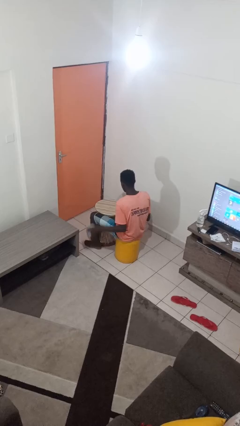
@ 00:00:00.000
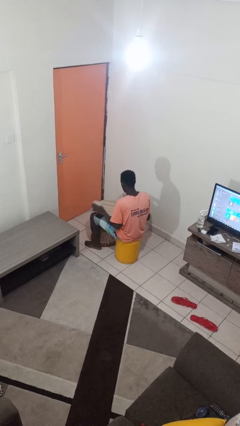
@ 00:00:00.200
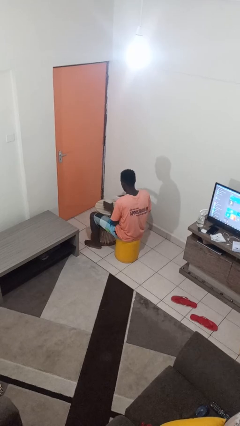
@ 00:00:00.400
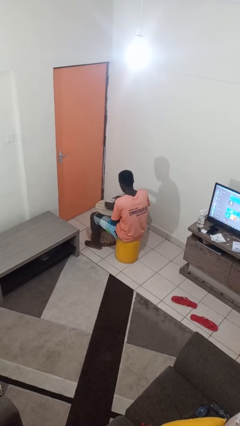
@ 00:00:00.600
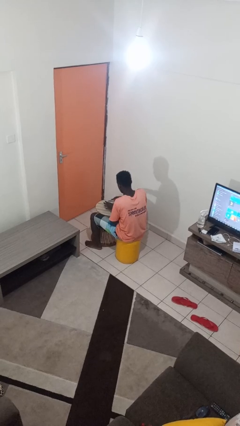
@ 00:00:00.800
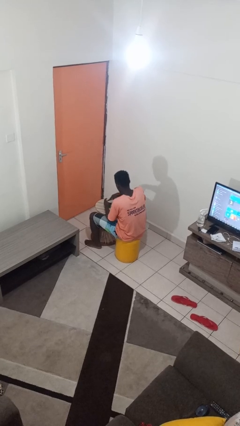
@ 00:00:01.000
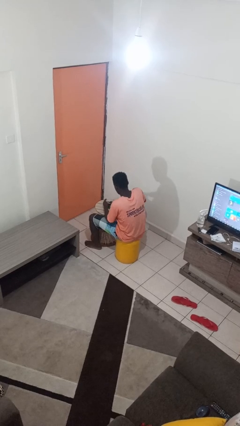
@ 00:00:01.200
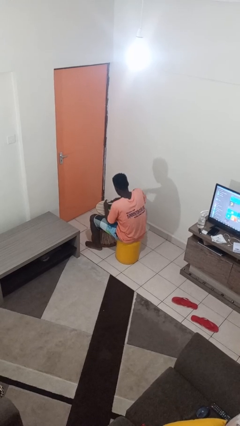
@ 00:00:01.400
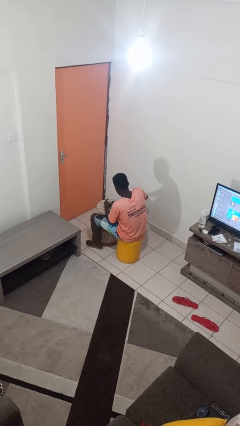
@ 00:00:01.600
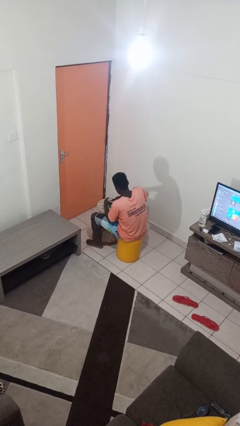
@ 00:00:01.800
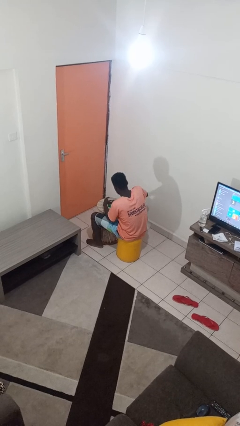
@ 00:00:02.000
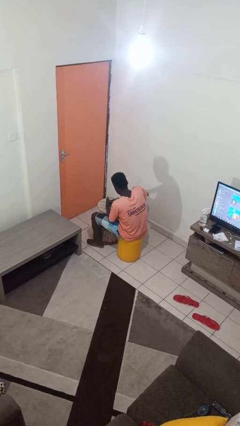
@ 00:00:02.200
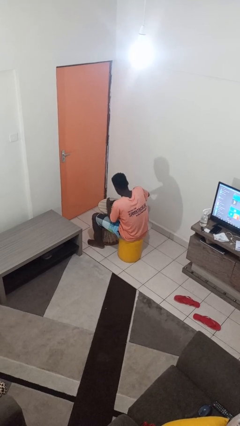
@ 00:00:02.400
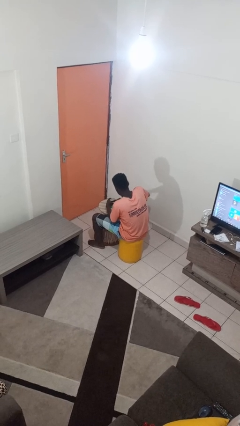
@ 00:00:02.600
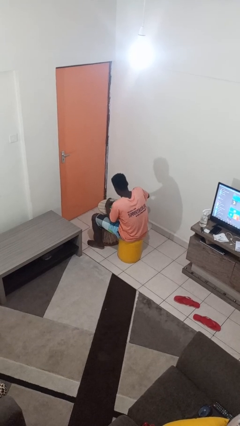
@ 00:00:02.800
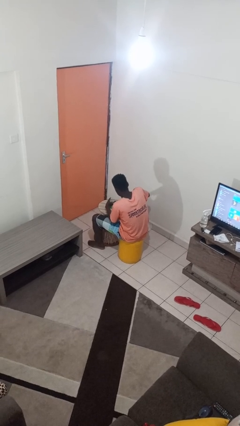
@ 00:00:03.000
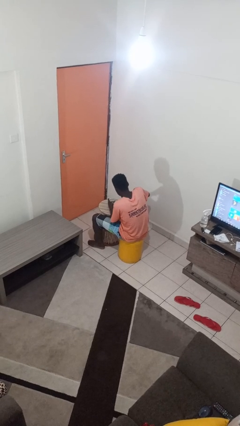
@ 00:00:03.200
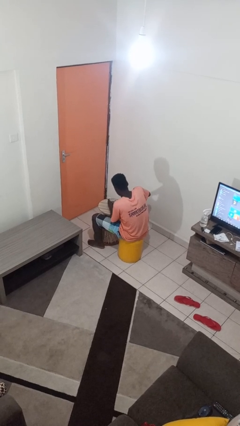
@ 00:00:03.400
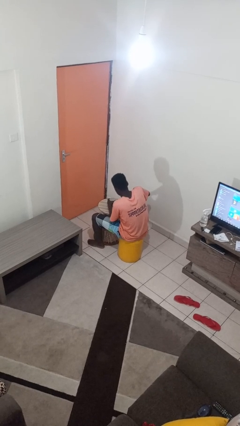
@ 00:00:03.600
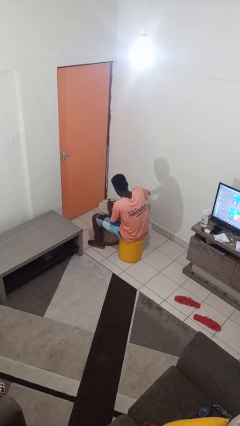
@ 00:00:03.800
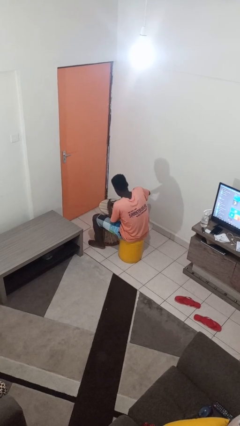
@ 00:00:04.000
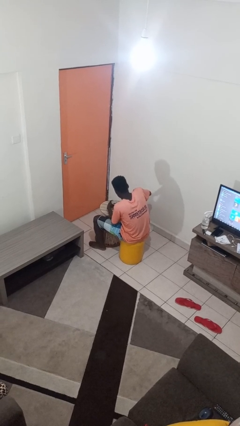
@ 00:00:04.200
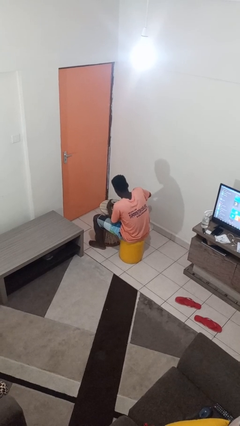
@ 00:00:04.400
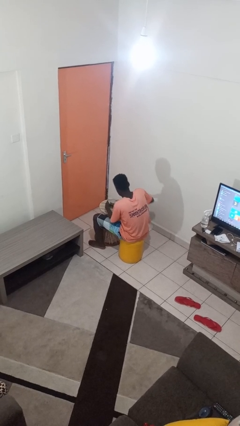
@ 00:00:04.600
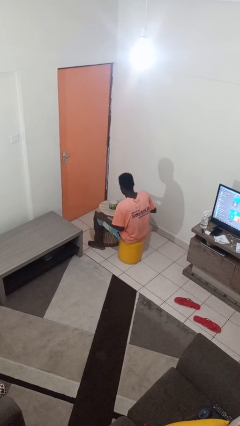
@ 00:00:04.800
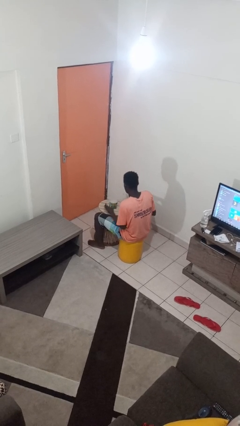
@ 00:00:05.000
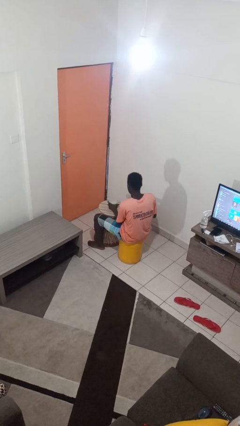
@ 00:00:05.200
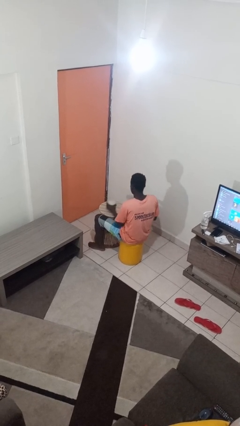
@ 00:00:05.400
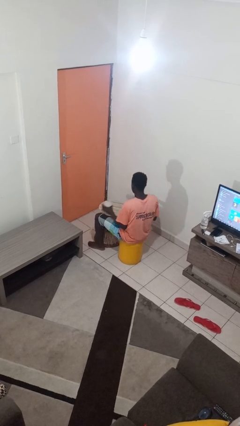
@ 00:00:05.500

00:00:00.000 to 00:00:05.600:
person opens can with can opener

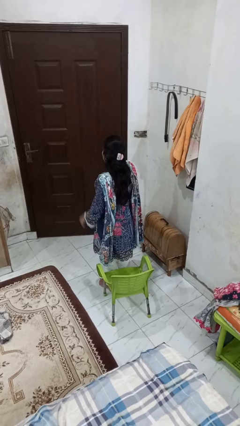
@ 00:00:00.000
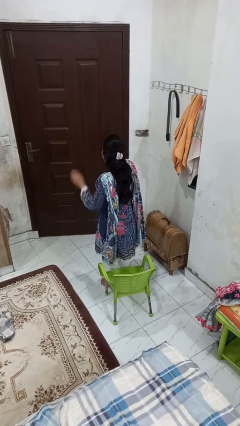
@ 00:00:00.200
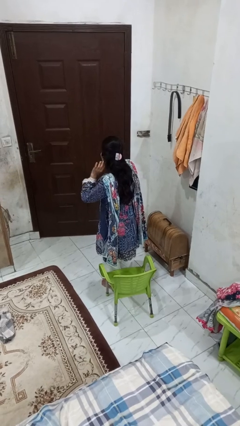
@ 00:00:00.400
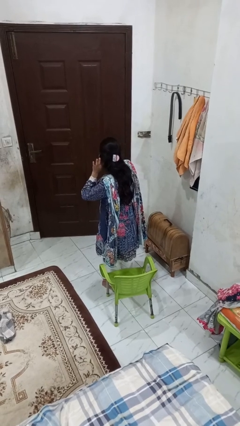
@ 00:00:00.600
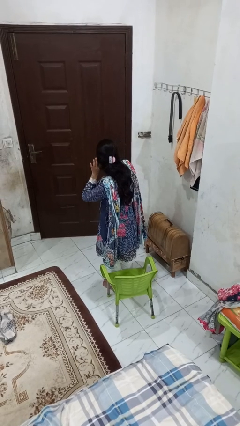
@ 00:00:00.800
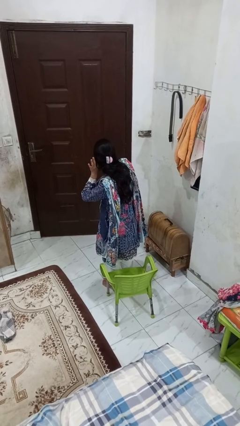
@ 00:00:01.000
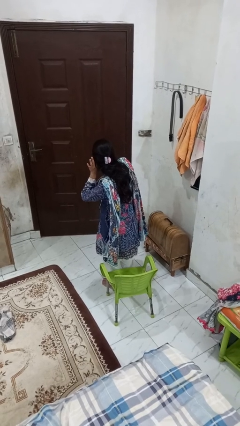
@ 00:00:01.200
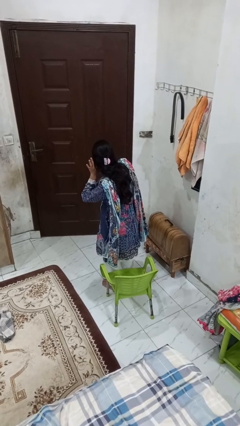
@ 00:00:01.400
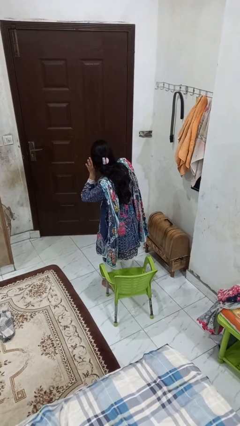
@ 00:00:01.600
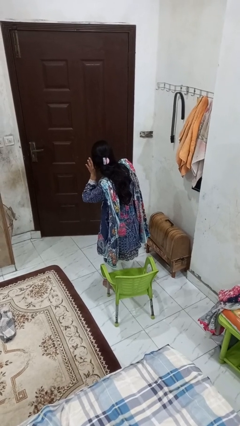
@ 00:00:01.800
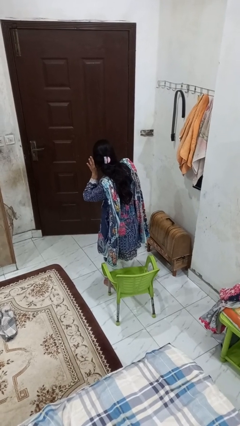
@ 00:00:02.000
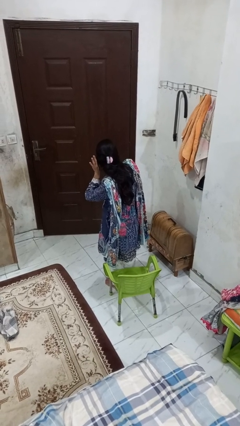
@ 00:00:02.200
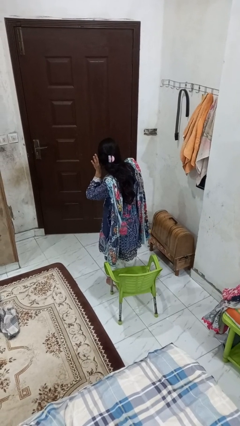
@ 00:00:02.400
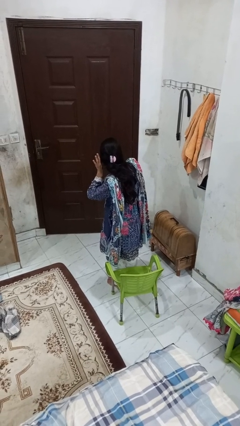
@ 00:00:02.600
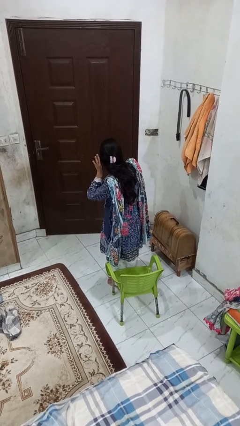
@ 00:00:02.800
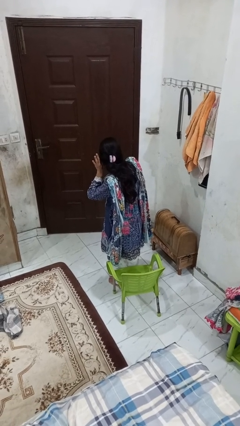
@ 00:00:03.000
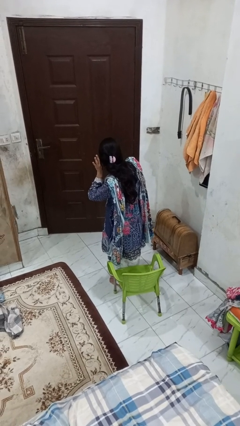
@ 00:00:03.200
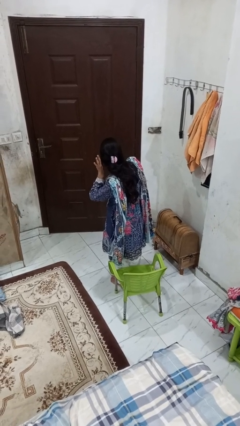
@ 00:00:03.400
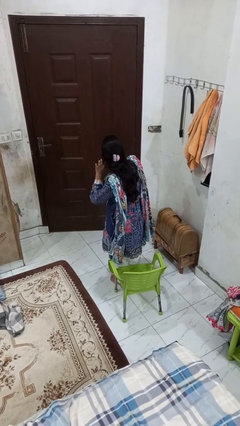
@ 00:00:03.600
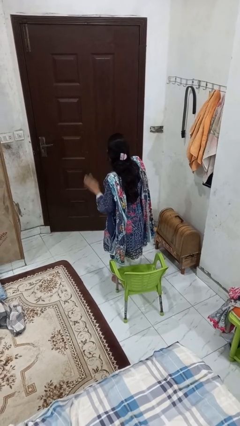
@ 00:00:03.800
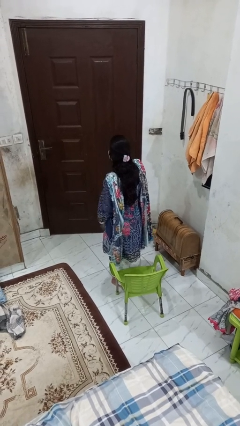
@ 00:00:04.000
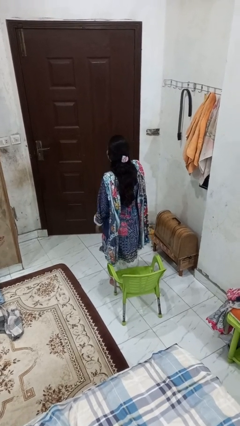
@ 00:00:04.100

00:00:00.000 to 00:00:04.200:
person gestures listen closely

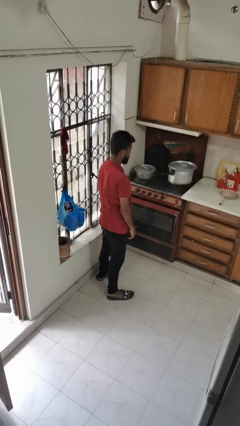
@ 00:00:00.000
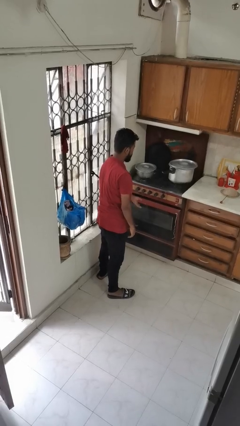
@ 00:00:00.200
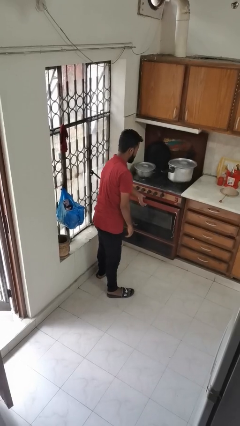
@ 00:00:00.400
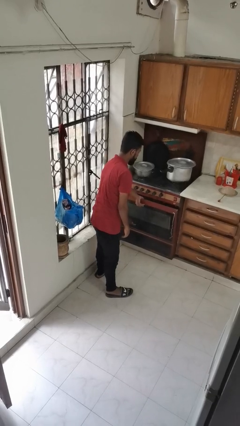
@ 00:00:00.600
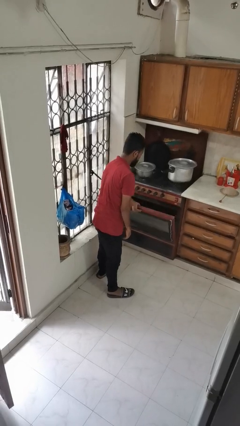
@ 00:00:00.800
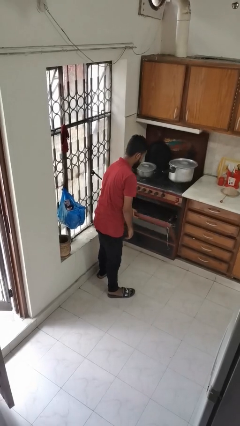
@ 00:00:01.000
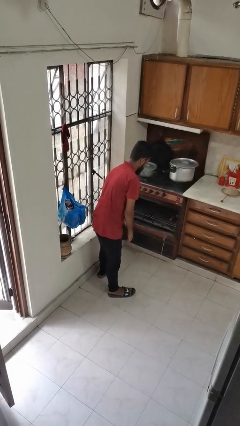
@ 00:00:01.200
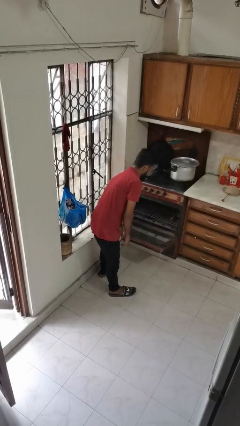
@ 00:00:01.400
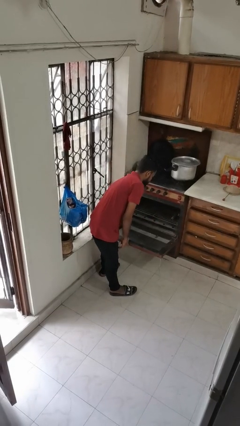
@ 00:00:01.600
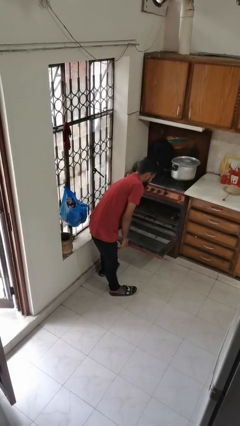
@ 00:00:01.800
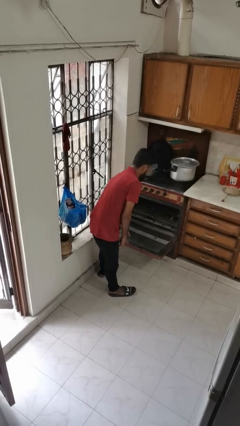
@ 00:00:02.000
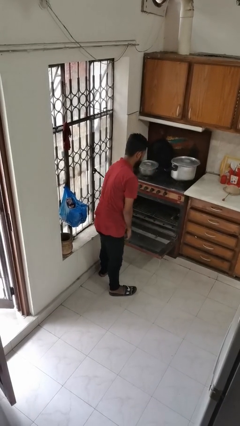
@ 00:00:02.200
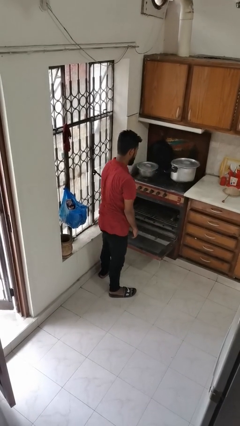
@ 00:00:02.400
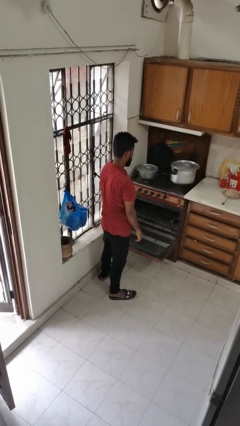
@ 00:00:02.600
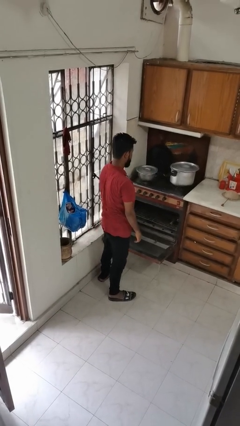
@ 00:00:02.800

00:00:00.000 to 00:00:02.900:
person opens oven door

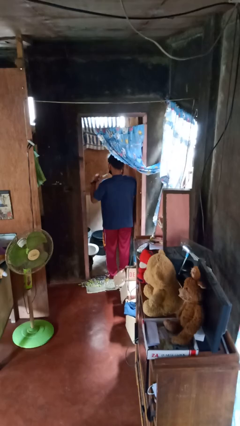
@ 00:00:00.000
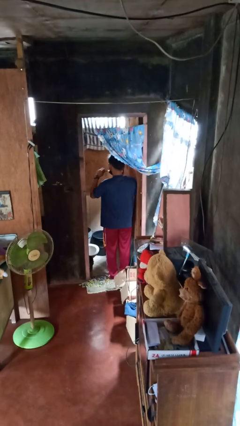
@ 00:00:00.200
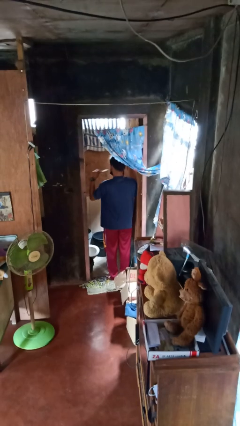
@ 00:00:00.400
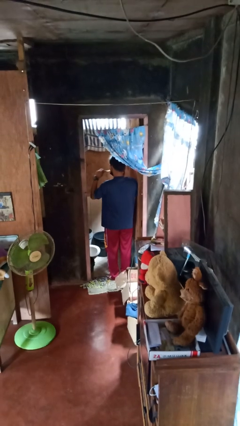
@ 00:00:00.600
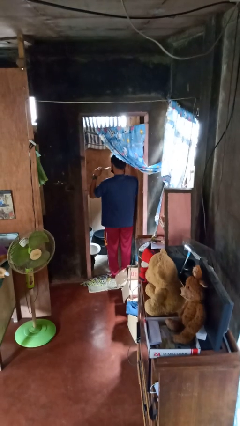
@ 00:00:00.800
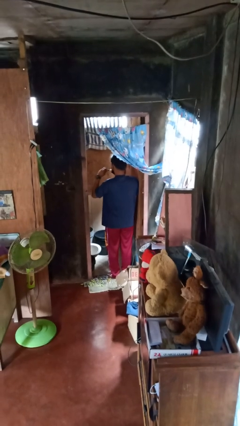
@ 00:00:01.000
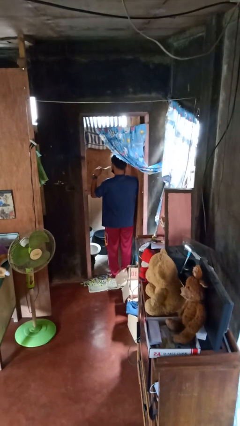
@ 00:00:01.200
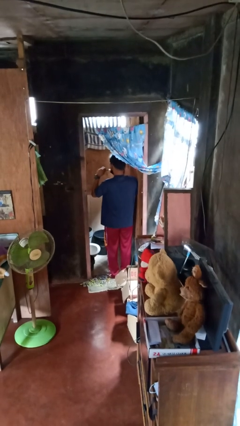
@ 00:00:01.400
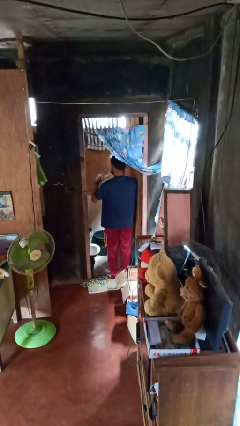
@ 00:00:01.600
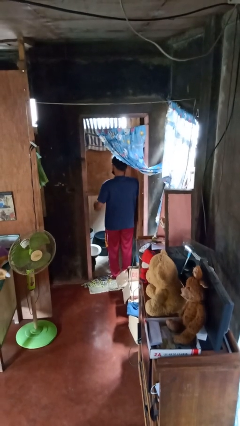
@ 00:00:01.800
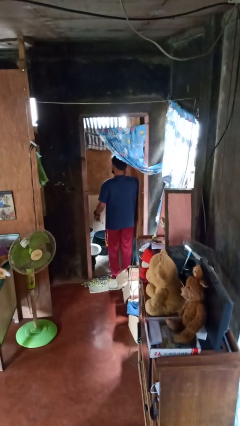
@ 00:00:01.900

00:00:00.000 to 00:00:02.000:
person brushes teeth

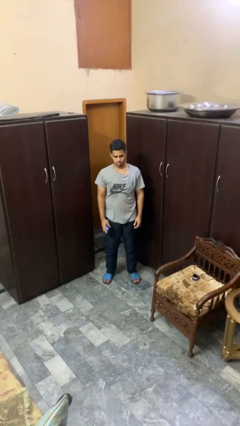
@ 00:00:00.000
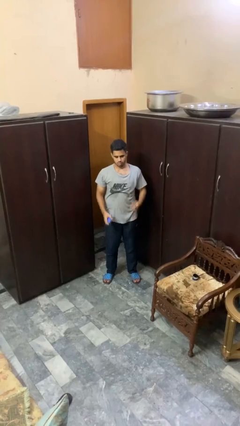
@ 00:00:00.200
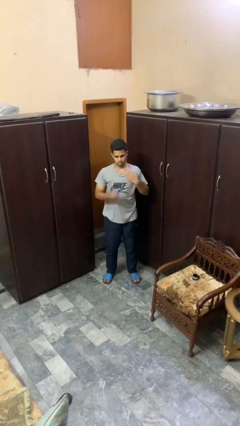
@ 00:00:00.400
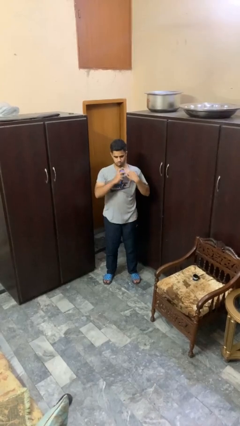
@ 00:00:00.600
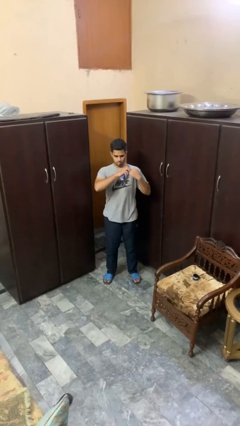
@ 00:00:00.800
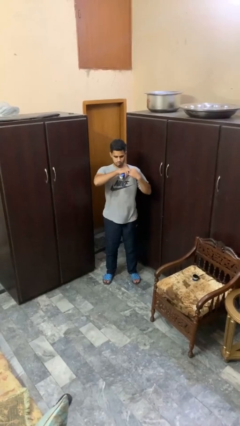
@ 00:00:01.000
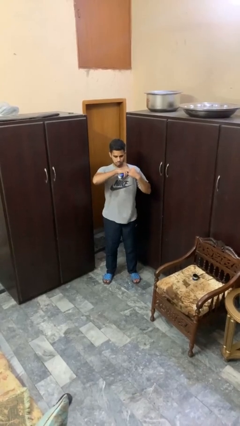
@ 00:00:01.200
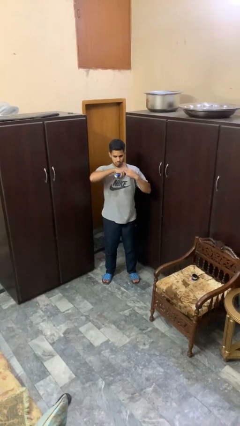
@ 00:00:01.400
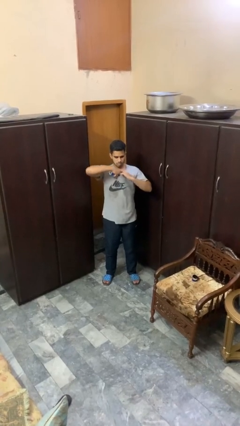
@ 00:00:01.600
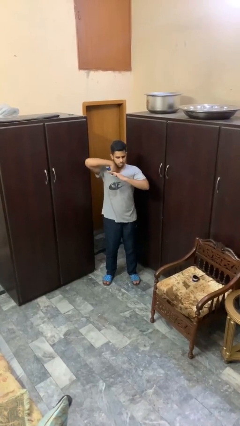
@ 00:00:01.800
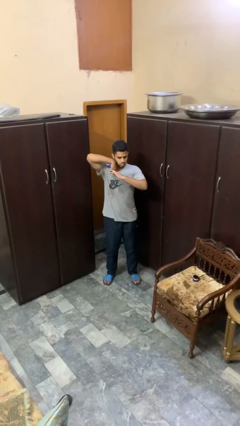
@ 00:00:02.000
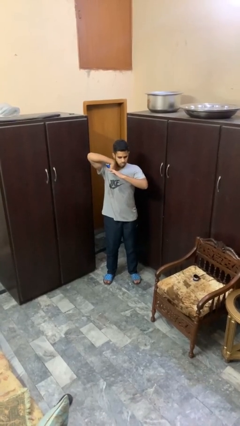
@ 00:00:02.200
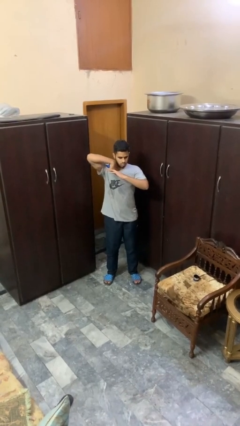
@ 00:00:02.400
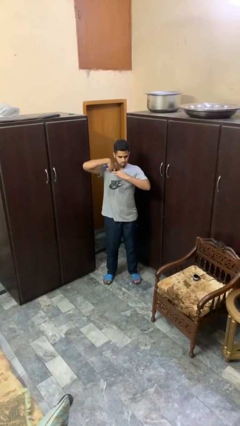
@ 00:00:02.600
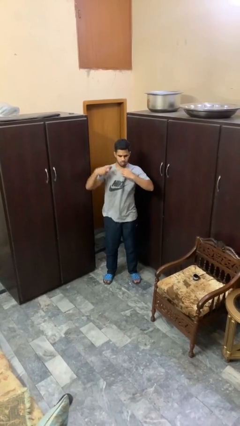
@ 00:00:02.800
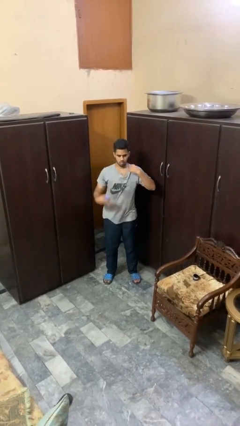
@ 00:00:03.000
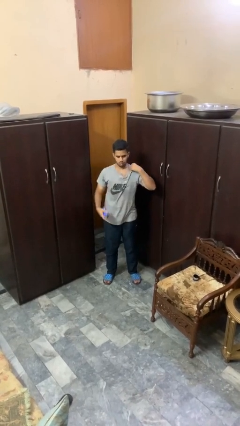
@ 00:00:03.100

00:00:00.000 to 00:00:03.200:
person applies deodorant
